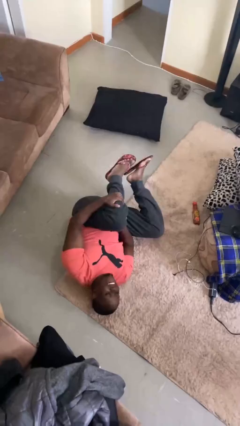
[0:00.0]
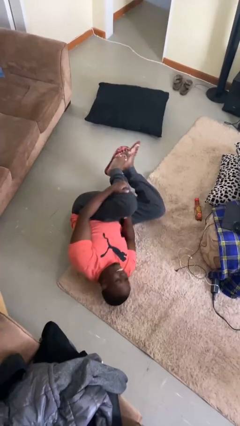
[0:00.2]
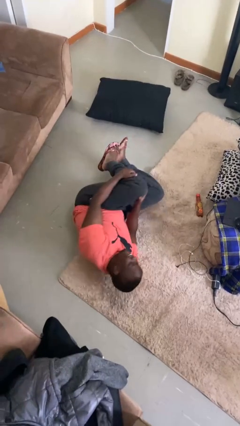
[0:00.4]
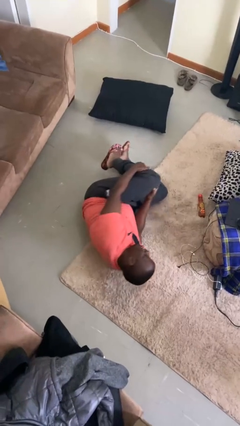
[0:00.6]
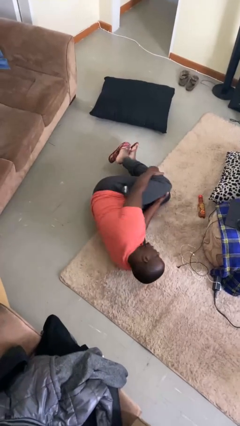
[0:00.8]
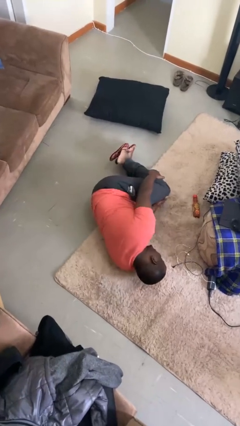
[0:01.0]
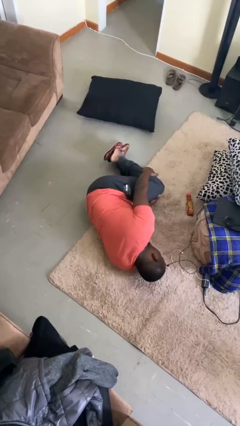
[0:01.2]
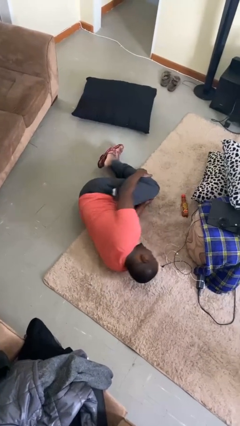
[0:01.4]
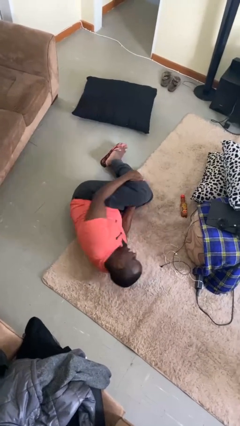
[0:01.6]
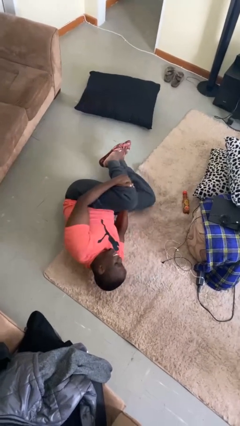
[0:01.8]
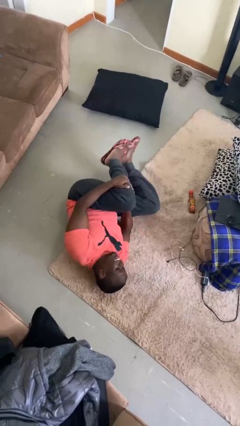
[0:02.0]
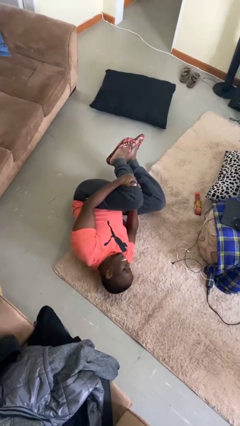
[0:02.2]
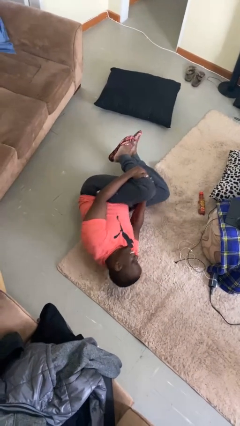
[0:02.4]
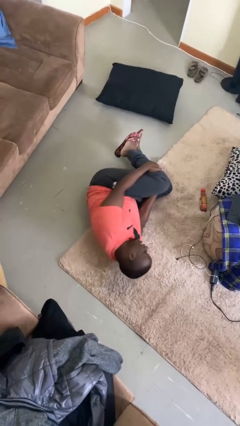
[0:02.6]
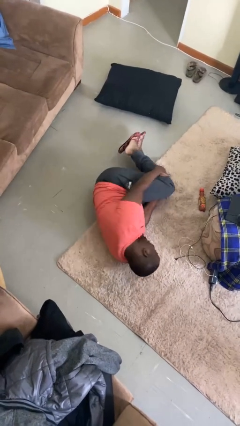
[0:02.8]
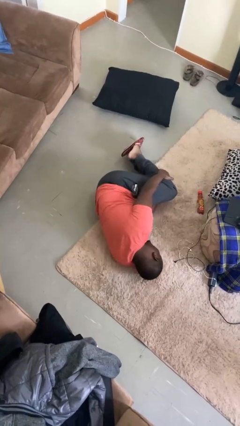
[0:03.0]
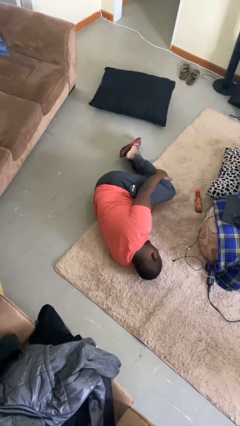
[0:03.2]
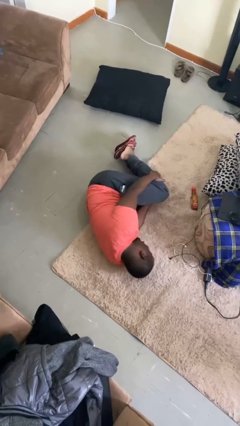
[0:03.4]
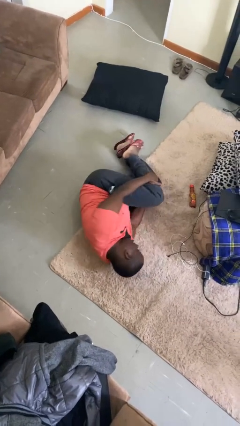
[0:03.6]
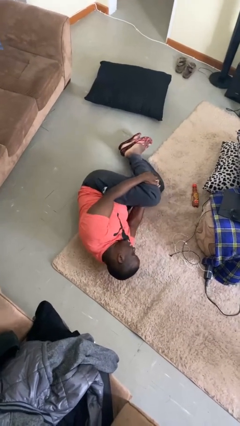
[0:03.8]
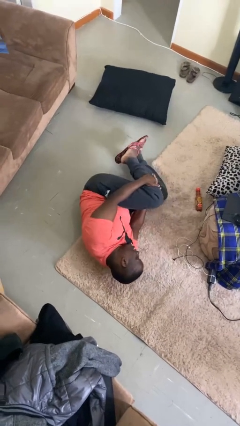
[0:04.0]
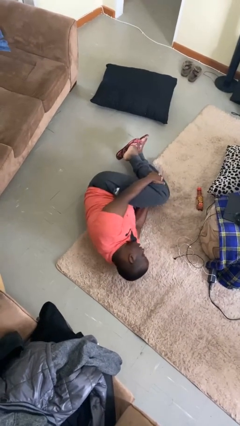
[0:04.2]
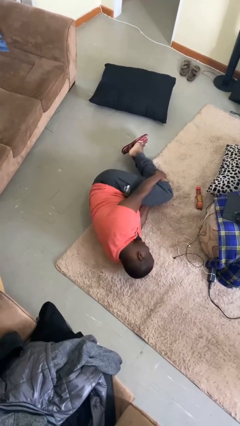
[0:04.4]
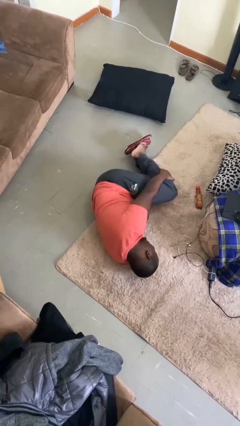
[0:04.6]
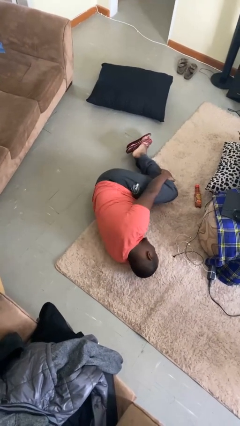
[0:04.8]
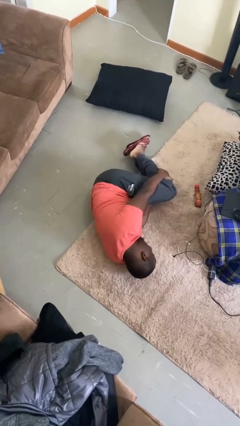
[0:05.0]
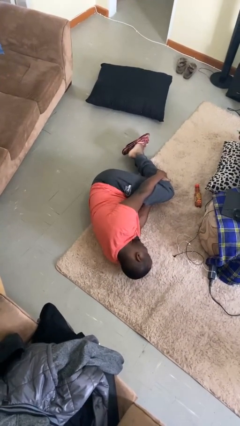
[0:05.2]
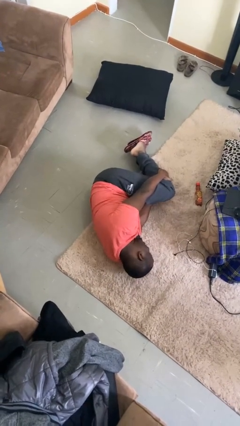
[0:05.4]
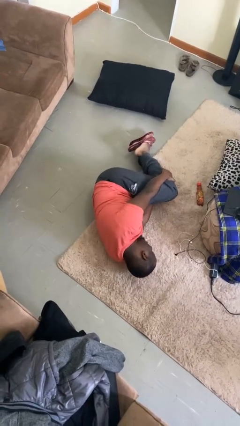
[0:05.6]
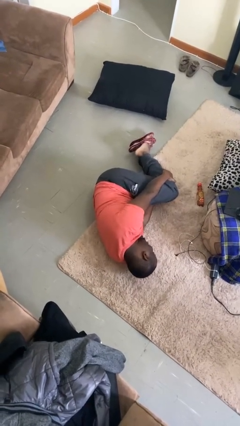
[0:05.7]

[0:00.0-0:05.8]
person lies down on floor

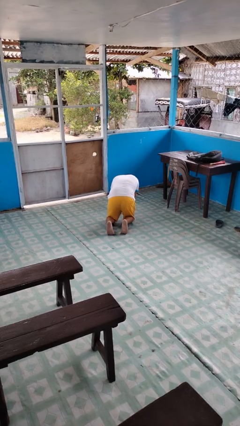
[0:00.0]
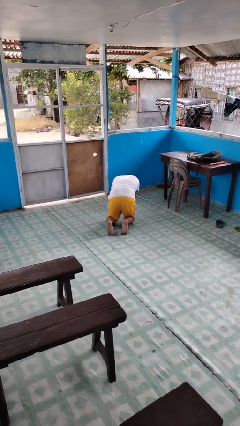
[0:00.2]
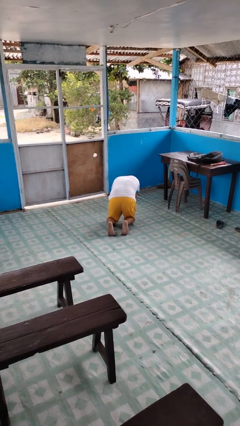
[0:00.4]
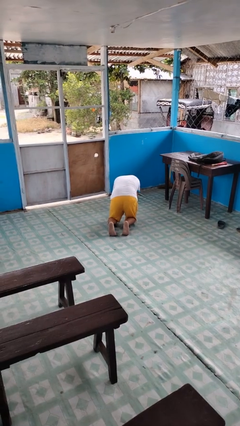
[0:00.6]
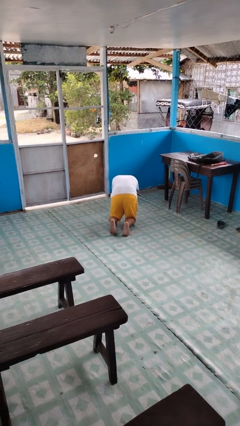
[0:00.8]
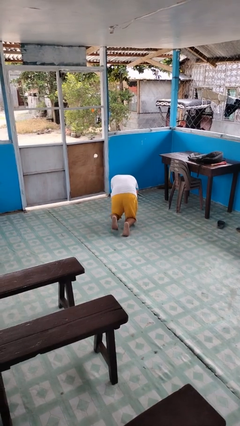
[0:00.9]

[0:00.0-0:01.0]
person crawls

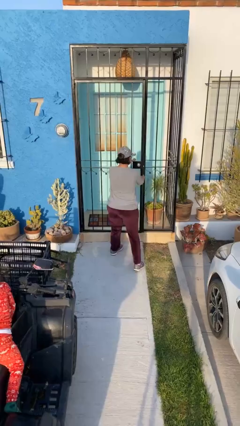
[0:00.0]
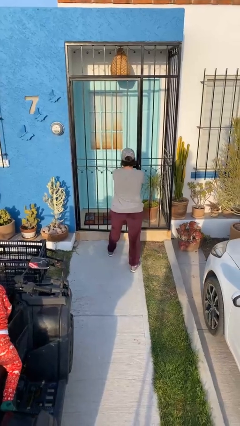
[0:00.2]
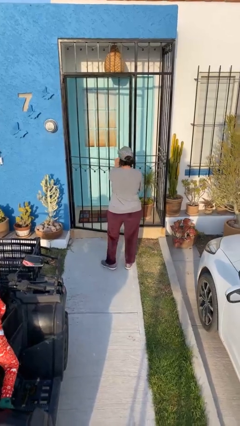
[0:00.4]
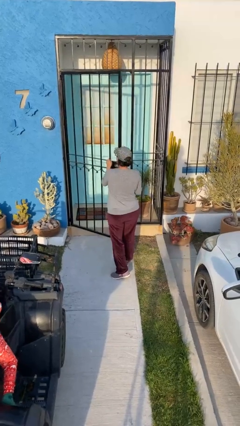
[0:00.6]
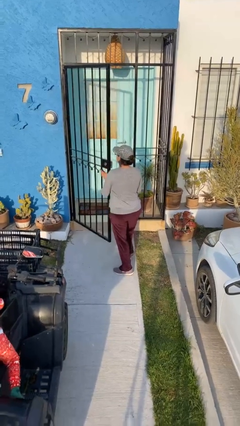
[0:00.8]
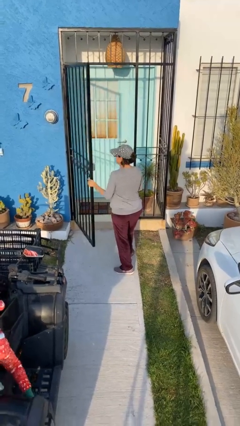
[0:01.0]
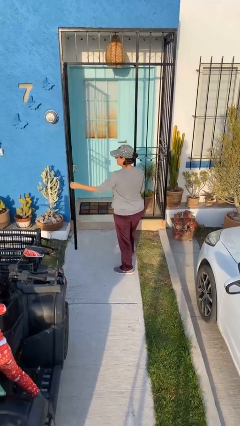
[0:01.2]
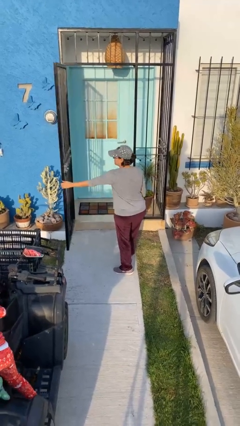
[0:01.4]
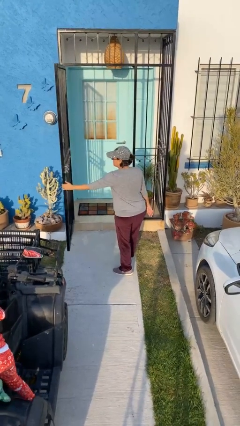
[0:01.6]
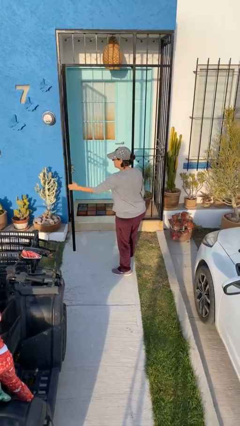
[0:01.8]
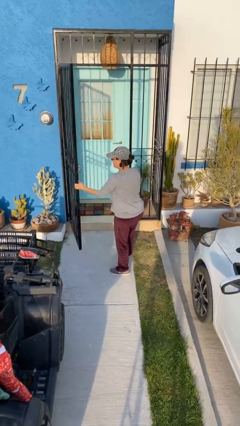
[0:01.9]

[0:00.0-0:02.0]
person opens facility door

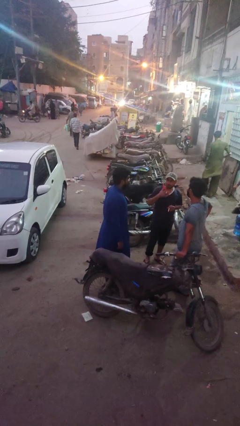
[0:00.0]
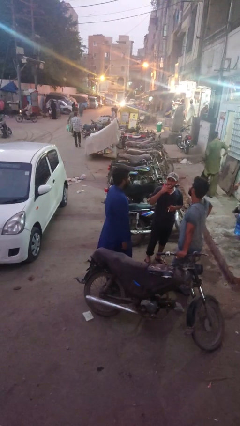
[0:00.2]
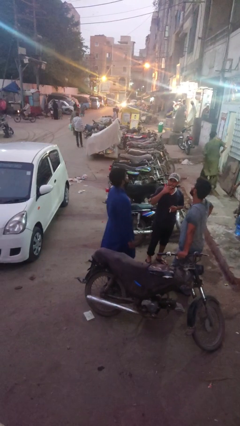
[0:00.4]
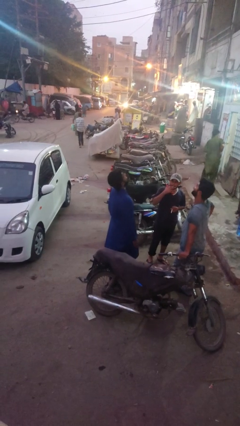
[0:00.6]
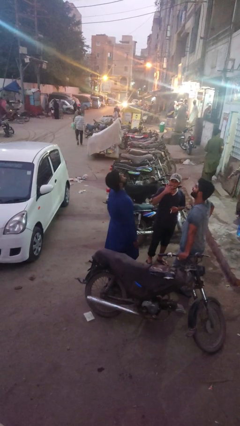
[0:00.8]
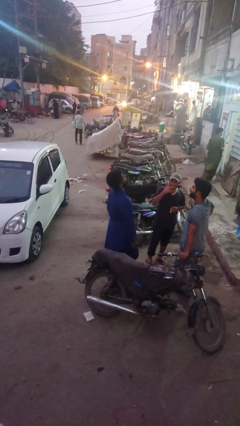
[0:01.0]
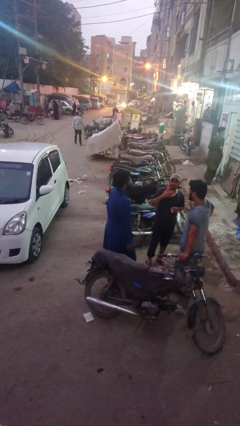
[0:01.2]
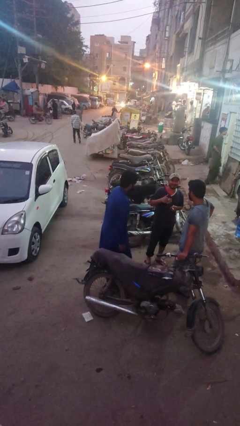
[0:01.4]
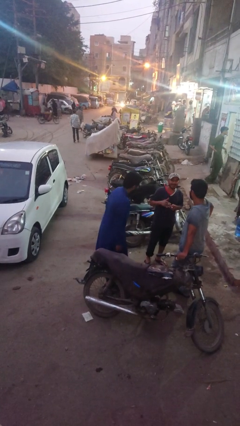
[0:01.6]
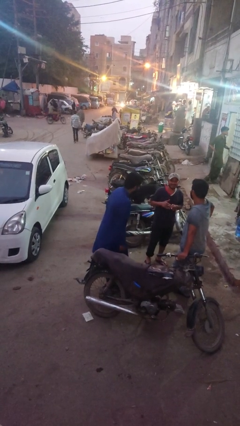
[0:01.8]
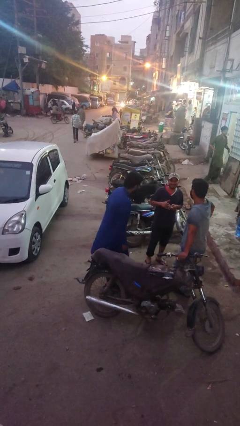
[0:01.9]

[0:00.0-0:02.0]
person laughs with person

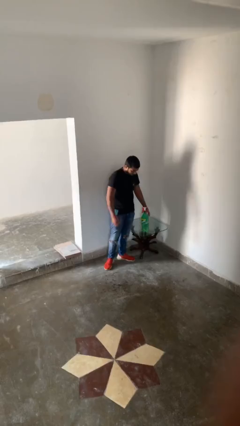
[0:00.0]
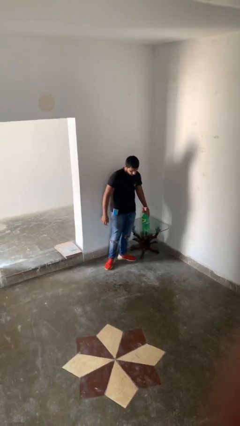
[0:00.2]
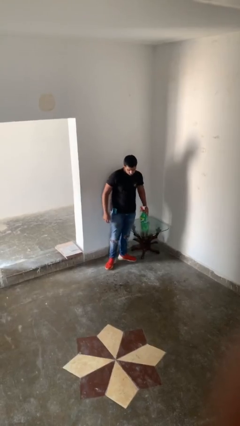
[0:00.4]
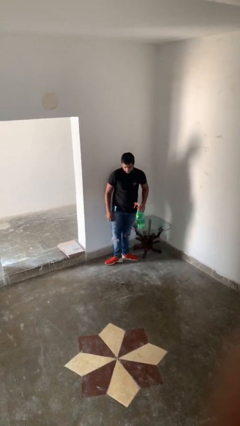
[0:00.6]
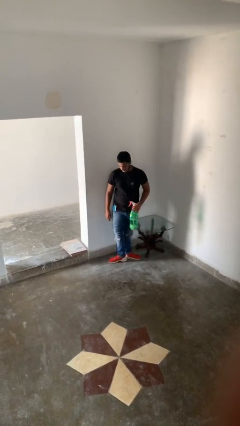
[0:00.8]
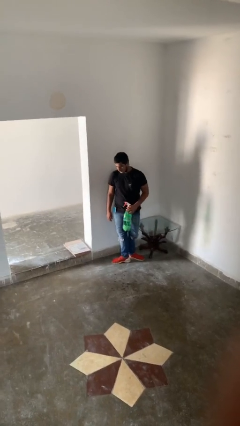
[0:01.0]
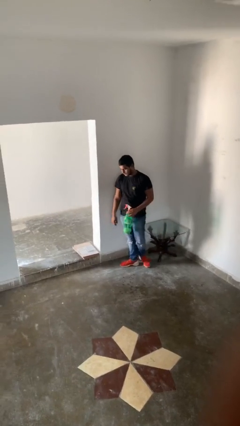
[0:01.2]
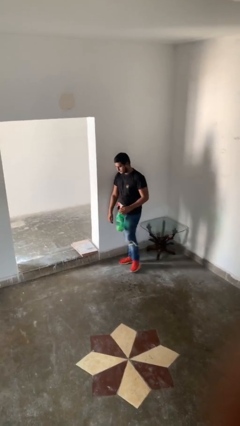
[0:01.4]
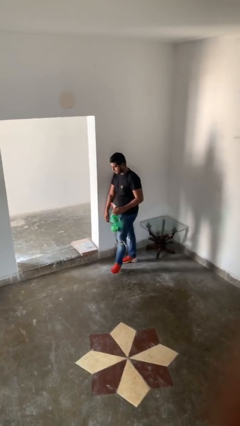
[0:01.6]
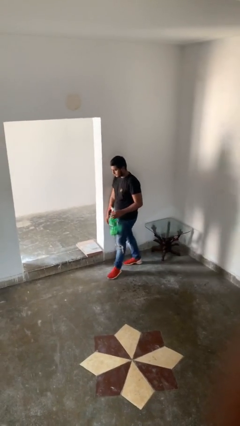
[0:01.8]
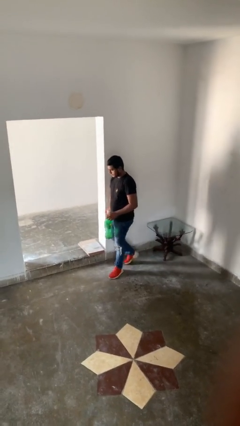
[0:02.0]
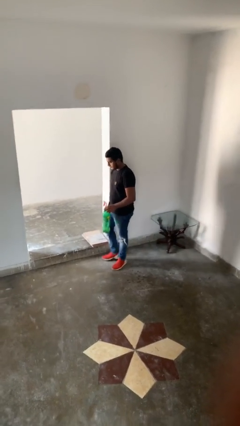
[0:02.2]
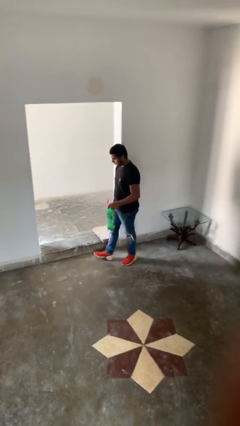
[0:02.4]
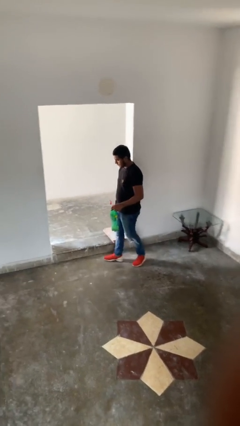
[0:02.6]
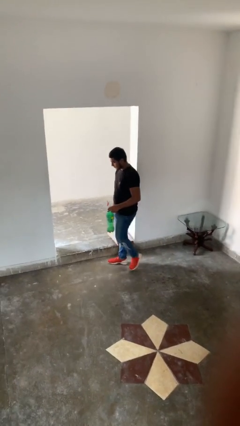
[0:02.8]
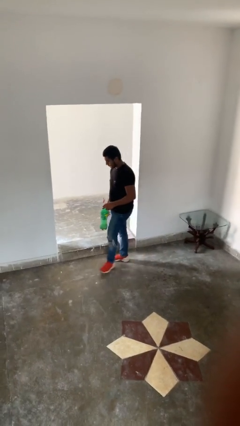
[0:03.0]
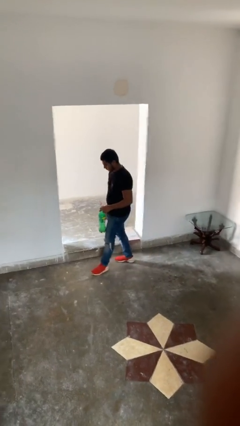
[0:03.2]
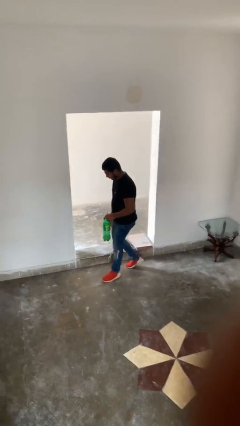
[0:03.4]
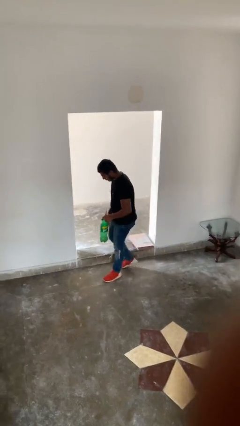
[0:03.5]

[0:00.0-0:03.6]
person picks up object from table

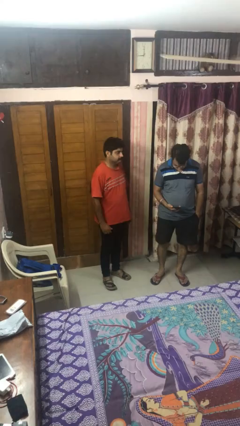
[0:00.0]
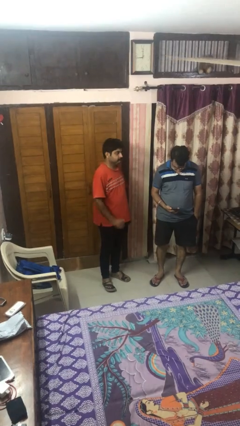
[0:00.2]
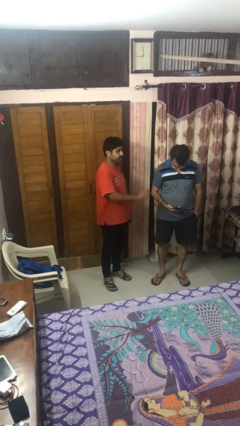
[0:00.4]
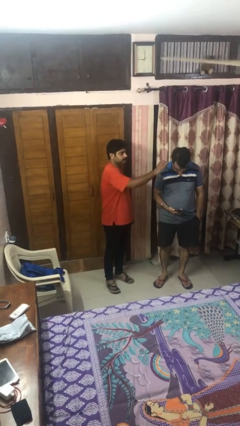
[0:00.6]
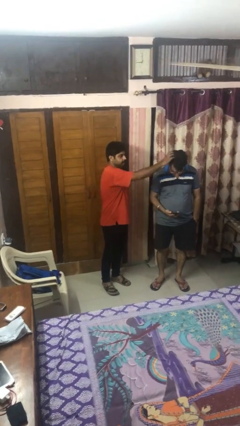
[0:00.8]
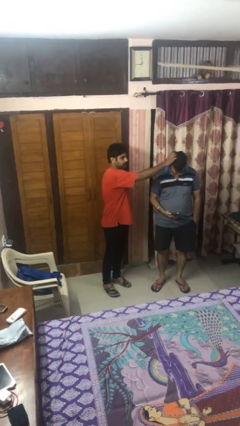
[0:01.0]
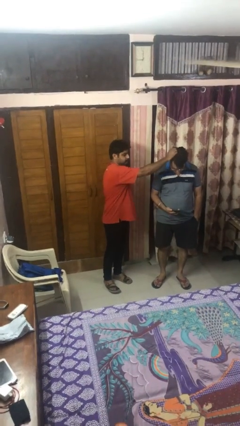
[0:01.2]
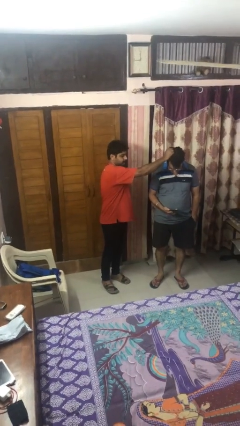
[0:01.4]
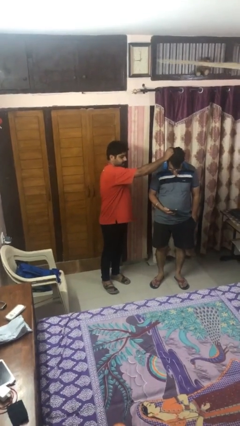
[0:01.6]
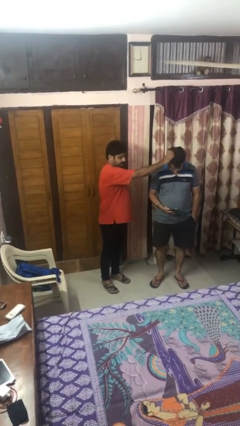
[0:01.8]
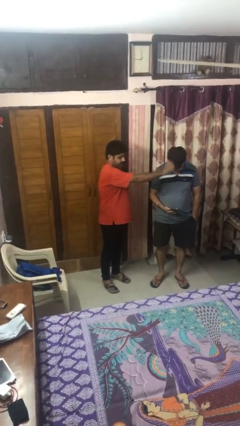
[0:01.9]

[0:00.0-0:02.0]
person grabs person by hair

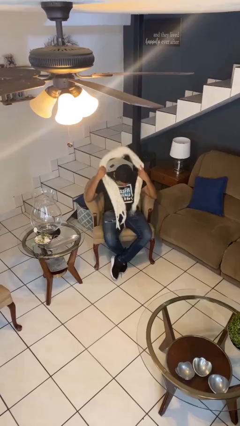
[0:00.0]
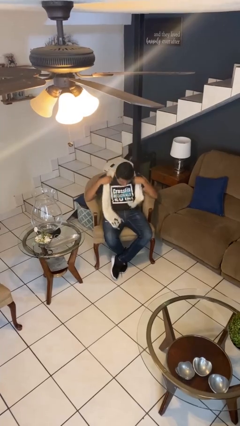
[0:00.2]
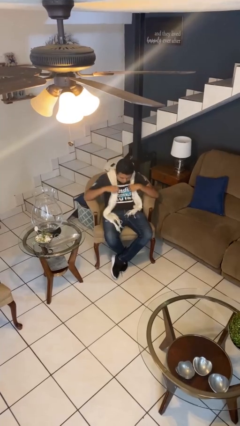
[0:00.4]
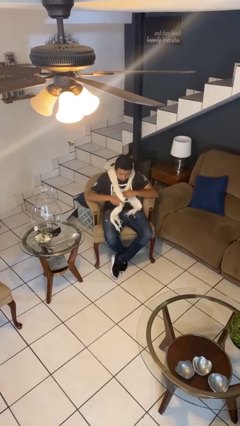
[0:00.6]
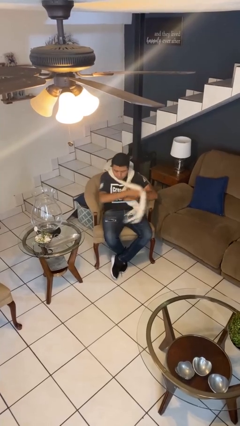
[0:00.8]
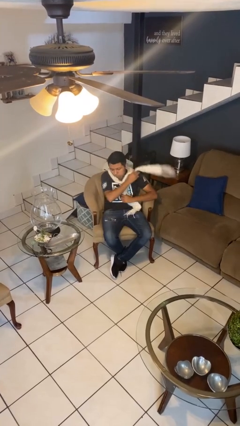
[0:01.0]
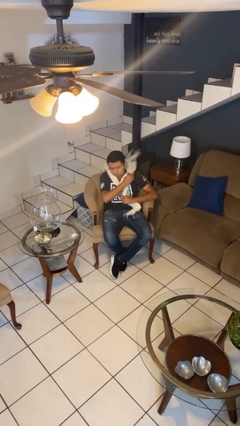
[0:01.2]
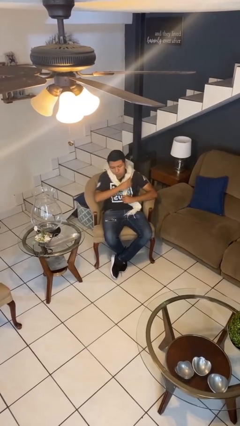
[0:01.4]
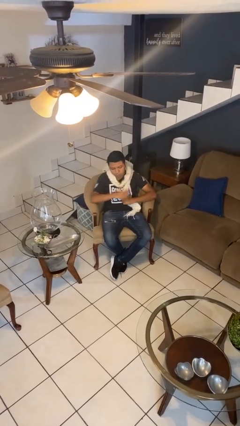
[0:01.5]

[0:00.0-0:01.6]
person puts on scarf
